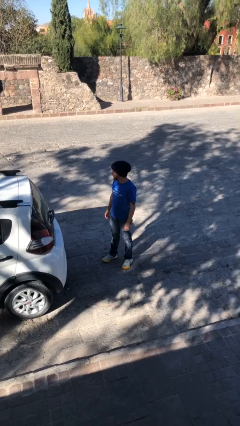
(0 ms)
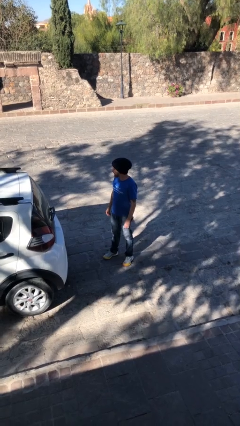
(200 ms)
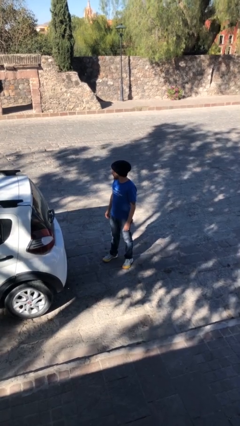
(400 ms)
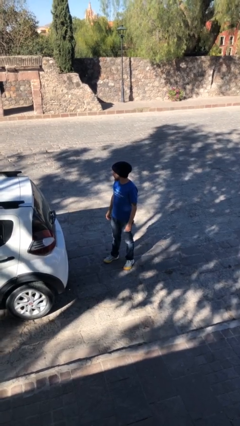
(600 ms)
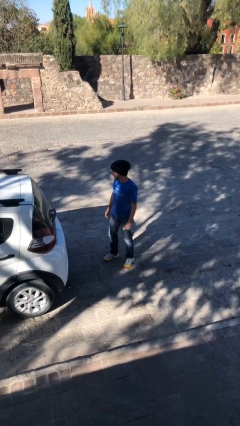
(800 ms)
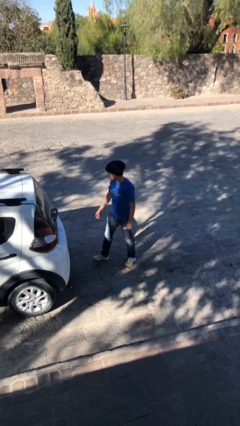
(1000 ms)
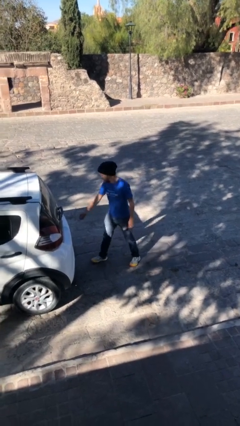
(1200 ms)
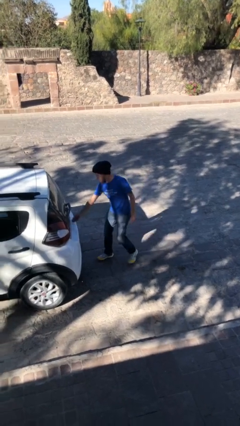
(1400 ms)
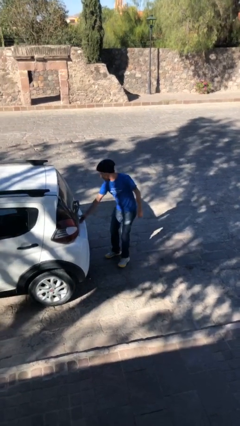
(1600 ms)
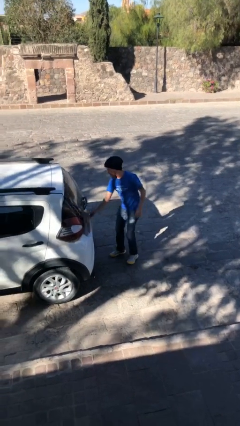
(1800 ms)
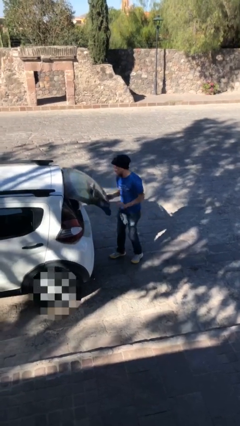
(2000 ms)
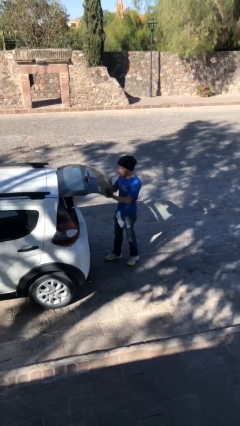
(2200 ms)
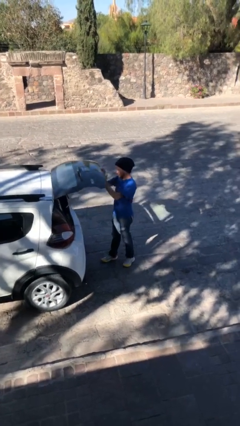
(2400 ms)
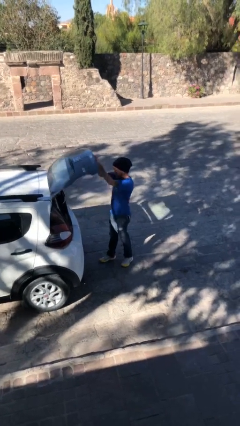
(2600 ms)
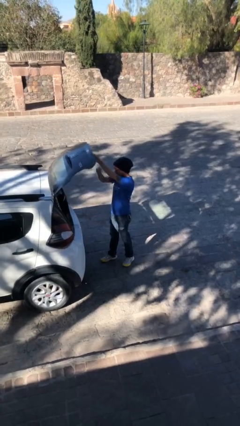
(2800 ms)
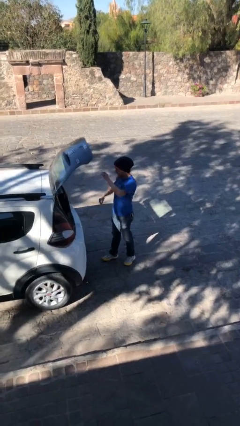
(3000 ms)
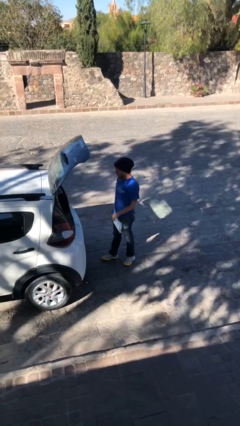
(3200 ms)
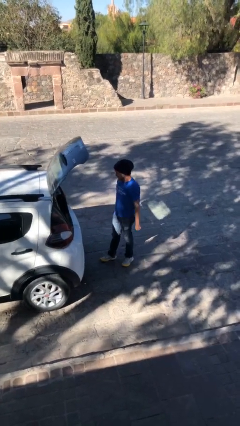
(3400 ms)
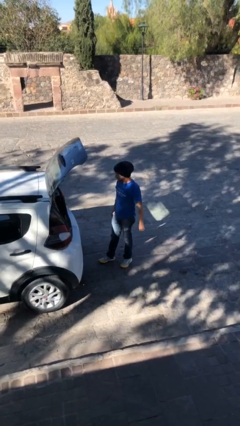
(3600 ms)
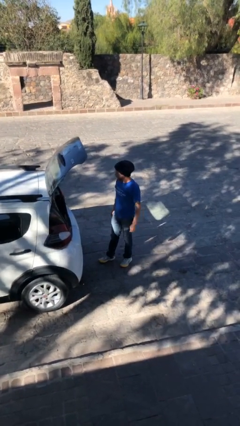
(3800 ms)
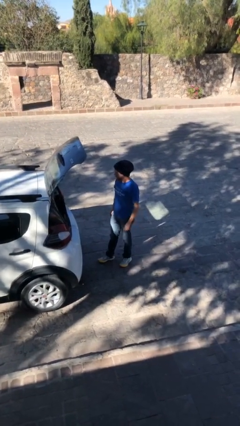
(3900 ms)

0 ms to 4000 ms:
person opens car trunk

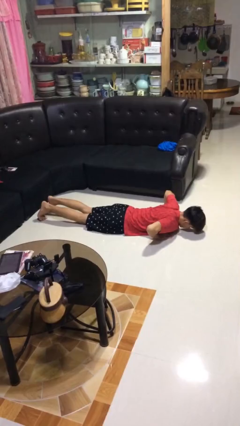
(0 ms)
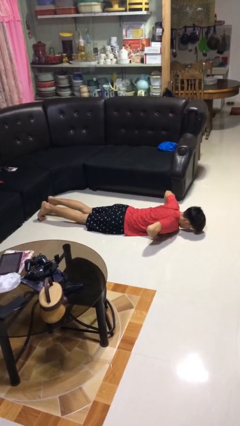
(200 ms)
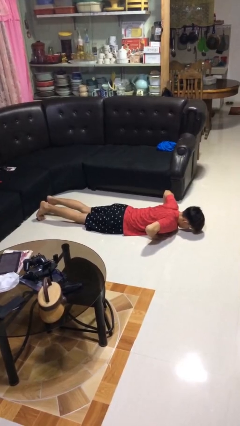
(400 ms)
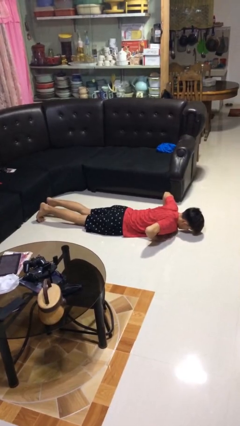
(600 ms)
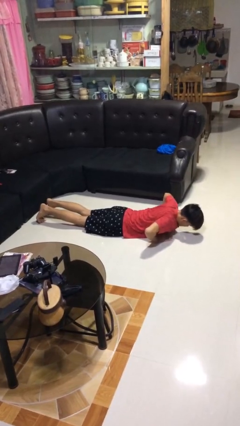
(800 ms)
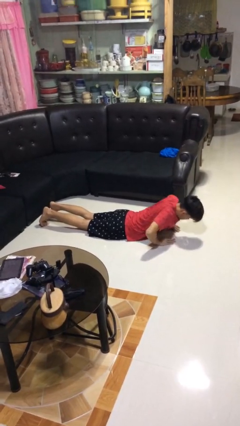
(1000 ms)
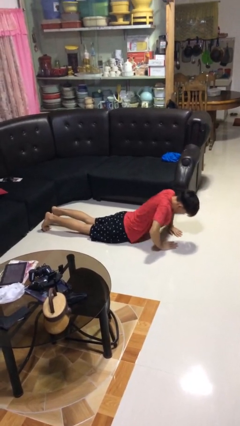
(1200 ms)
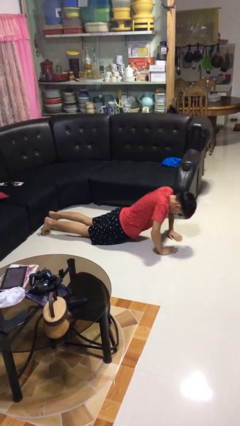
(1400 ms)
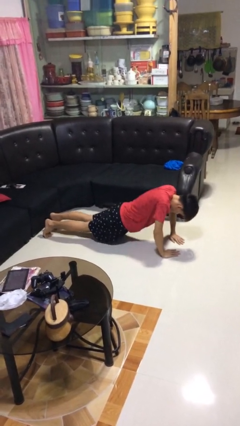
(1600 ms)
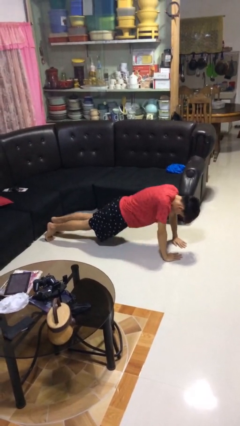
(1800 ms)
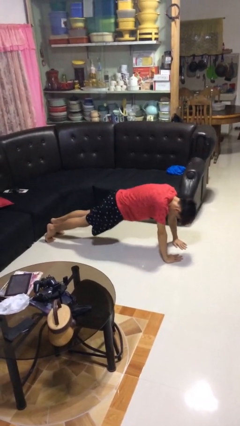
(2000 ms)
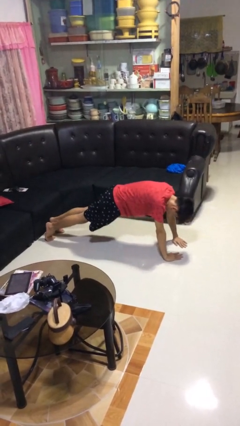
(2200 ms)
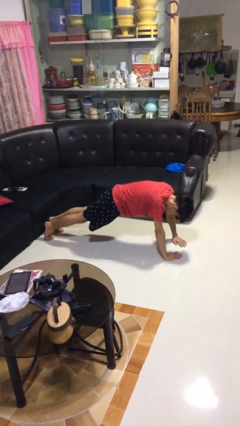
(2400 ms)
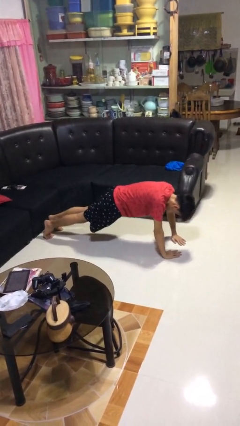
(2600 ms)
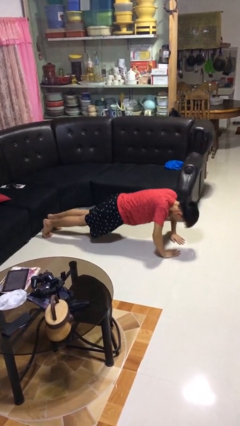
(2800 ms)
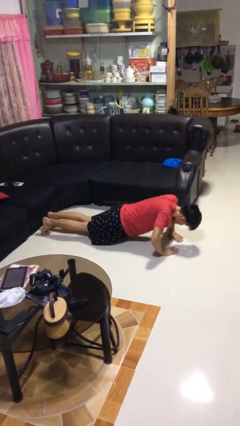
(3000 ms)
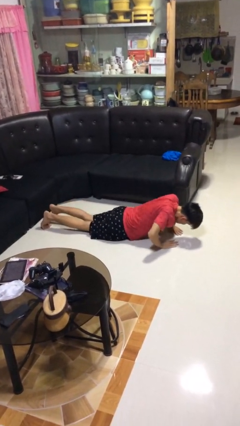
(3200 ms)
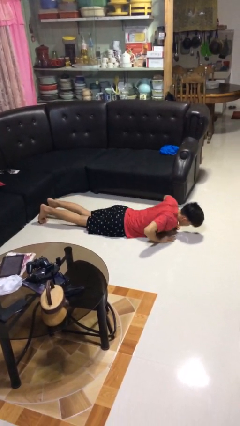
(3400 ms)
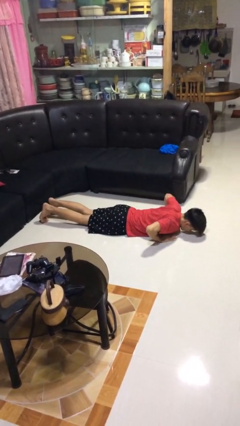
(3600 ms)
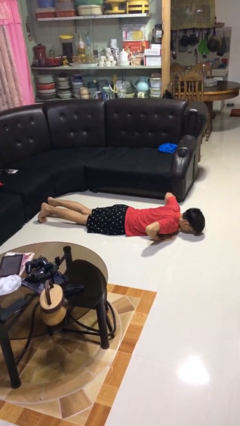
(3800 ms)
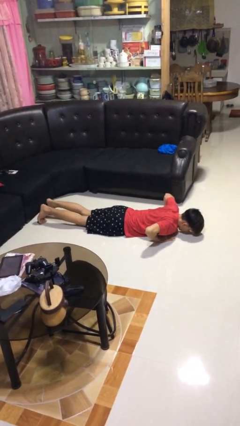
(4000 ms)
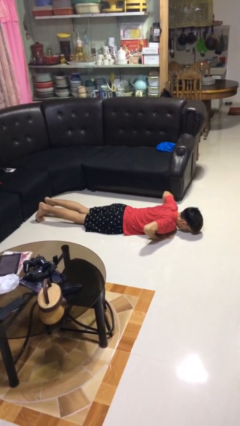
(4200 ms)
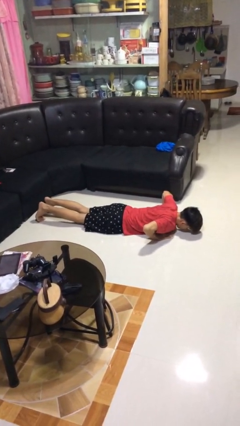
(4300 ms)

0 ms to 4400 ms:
person exercises with pushup

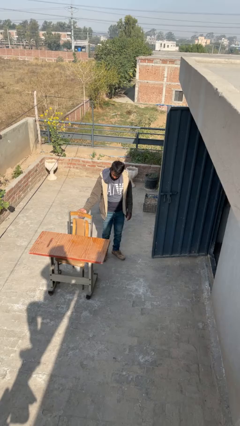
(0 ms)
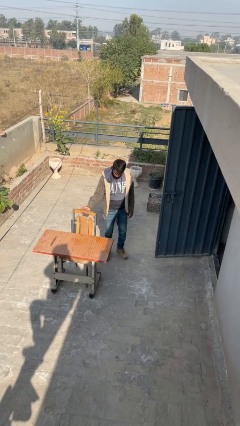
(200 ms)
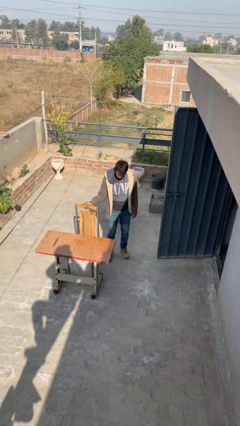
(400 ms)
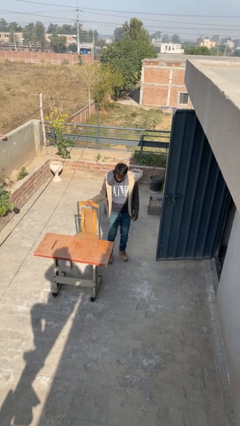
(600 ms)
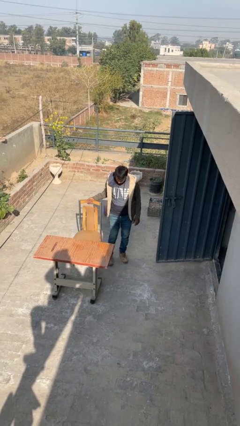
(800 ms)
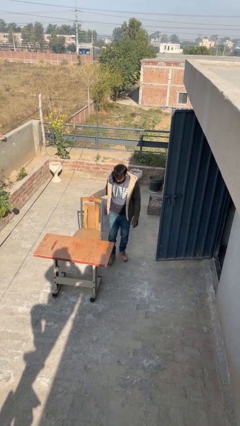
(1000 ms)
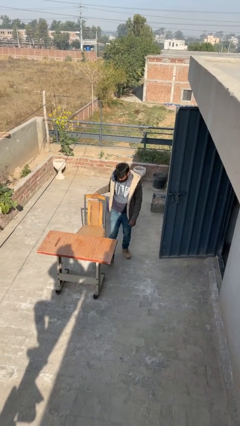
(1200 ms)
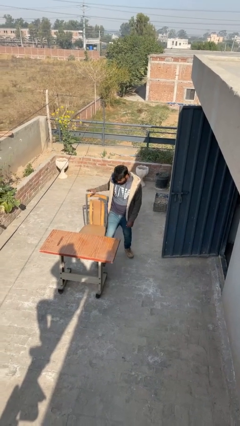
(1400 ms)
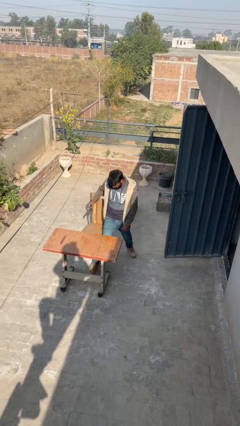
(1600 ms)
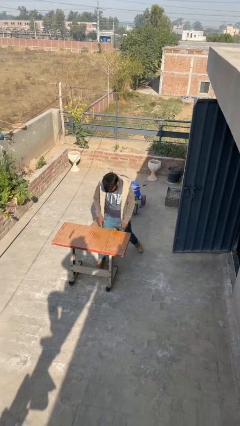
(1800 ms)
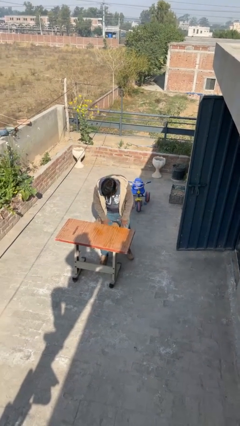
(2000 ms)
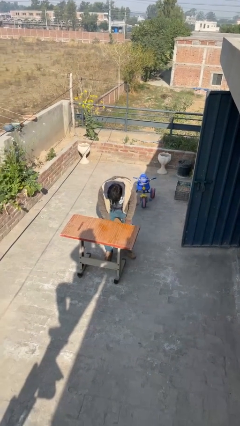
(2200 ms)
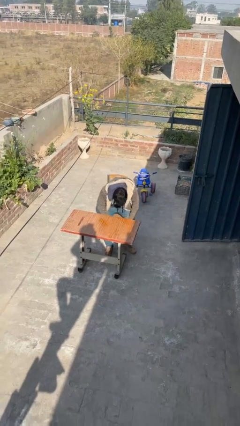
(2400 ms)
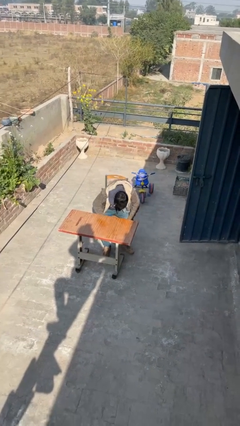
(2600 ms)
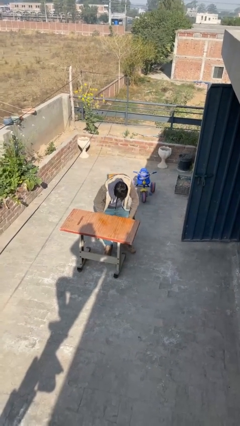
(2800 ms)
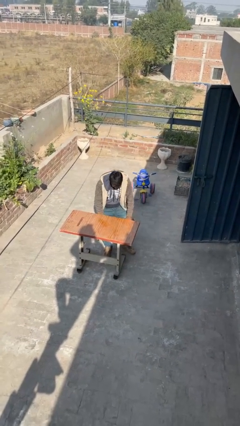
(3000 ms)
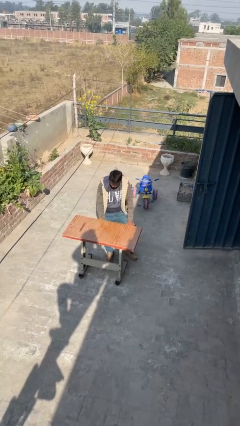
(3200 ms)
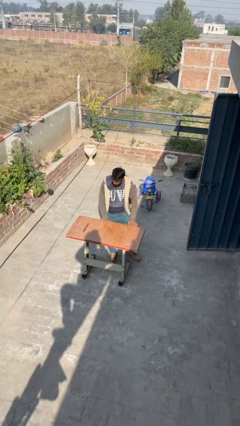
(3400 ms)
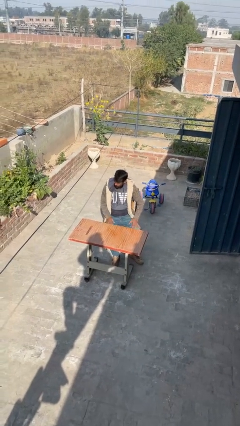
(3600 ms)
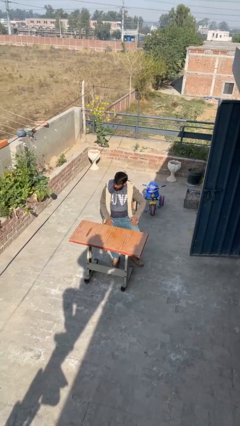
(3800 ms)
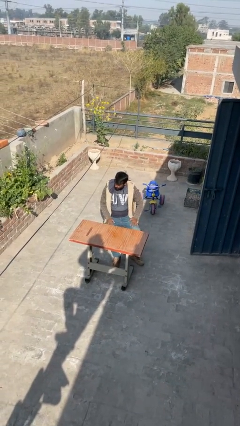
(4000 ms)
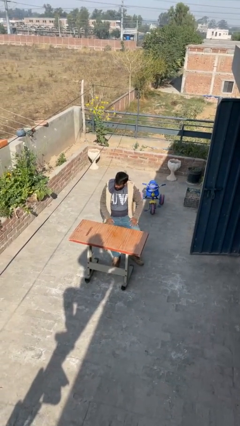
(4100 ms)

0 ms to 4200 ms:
person sits down

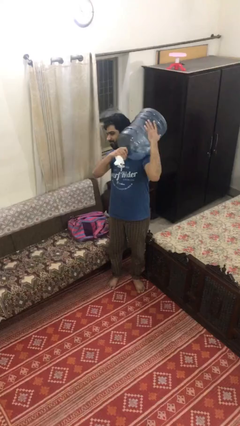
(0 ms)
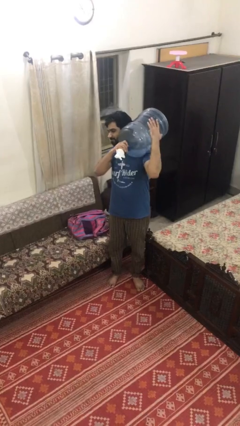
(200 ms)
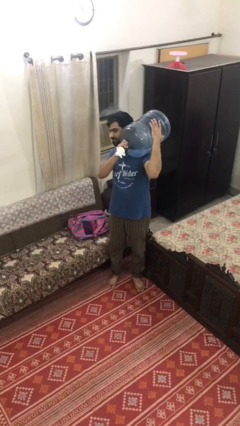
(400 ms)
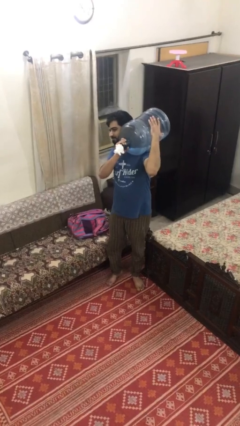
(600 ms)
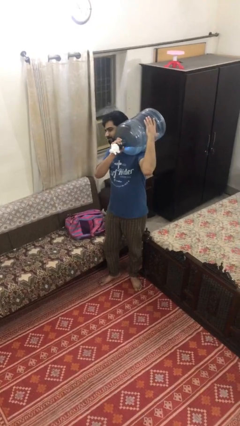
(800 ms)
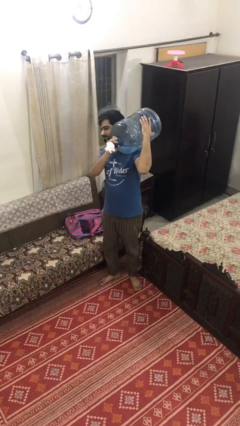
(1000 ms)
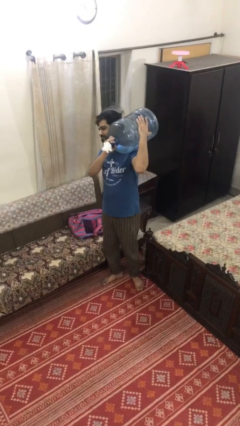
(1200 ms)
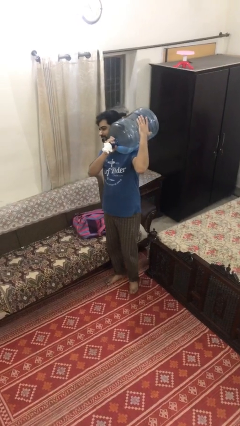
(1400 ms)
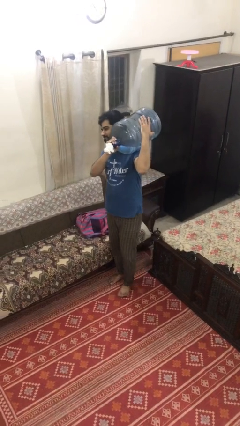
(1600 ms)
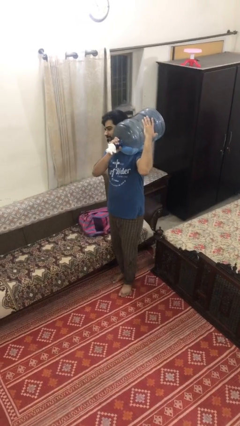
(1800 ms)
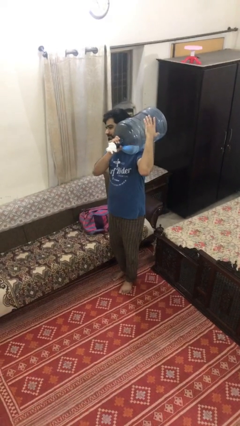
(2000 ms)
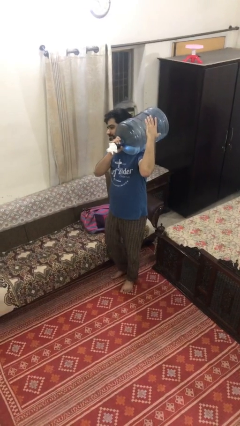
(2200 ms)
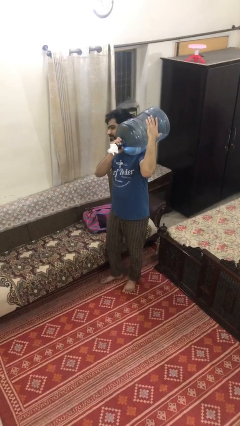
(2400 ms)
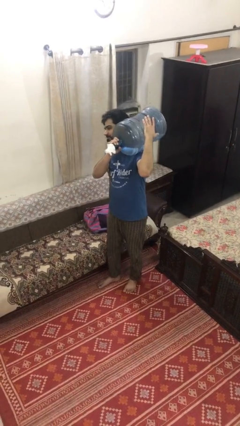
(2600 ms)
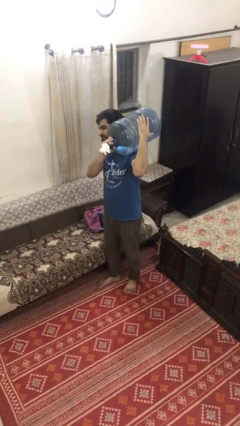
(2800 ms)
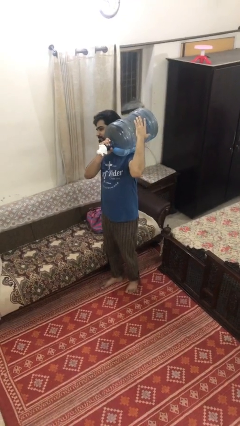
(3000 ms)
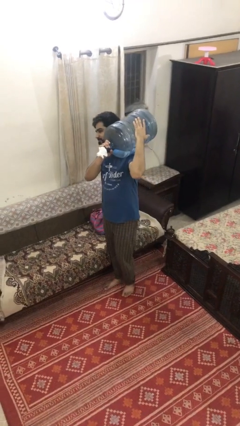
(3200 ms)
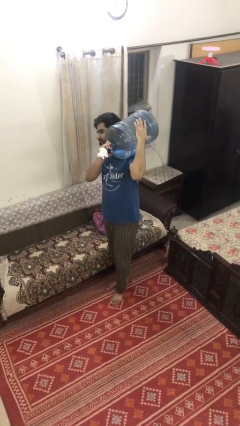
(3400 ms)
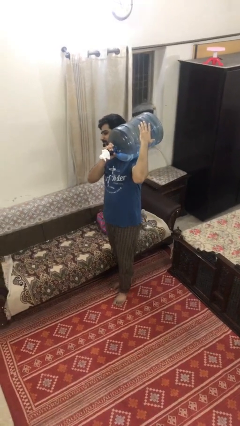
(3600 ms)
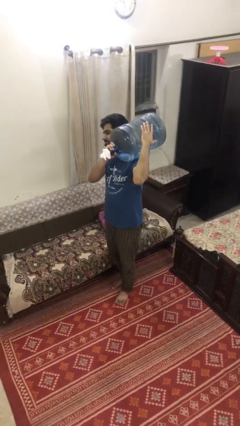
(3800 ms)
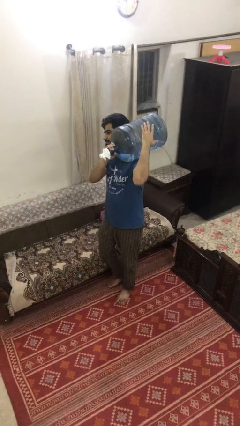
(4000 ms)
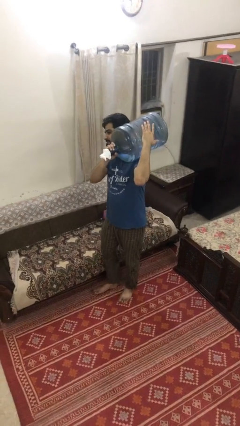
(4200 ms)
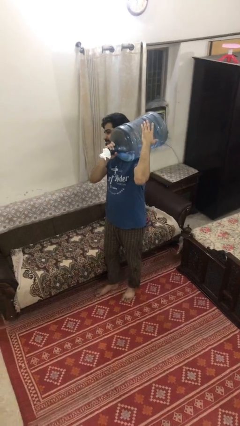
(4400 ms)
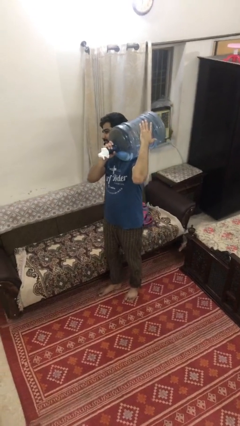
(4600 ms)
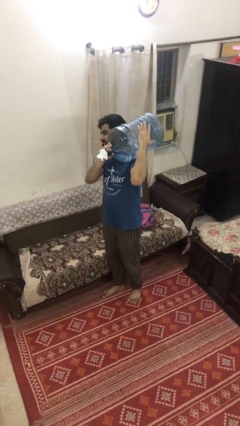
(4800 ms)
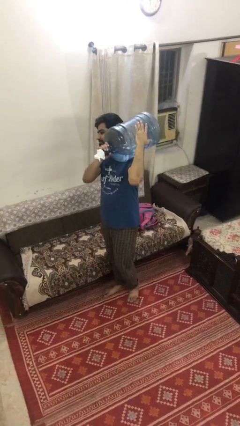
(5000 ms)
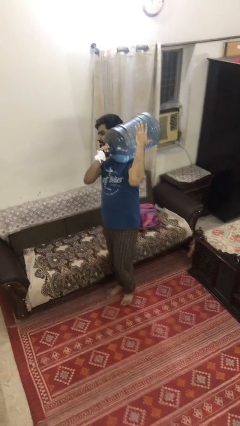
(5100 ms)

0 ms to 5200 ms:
person carries heavy object
